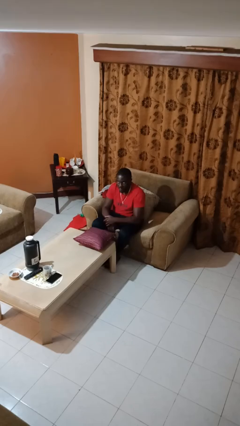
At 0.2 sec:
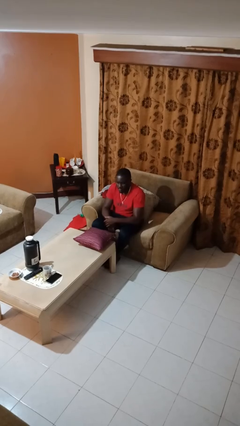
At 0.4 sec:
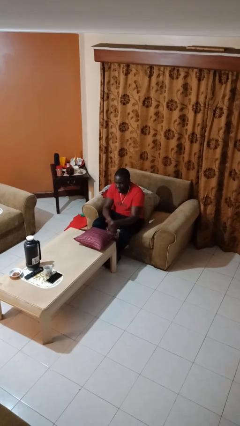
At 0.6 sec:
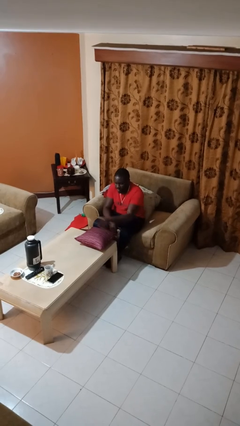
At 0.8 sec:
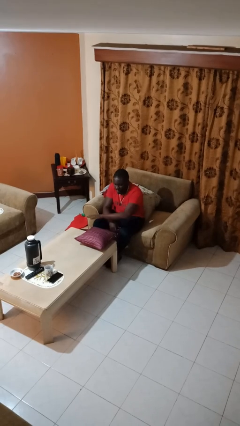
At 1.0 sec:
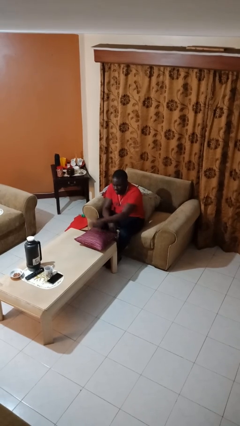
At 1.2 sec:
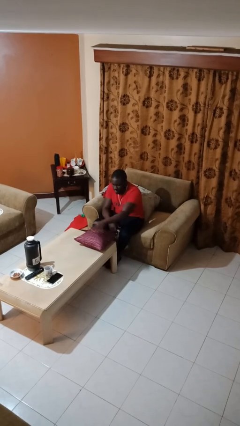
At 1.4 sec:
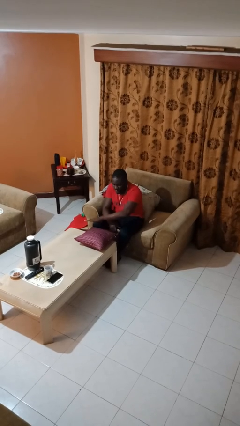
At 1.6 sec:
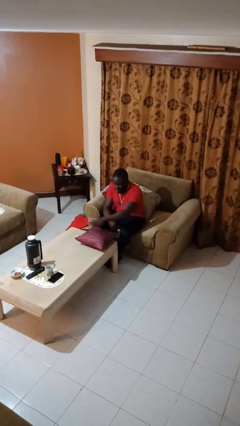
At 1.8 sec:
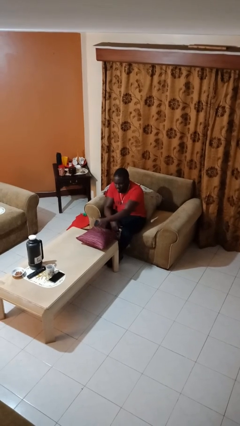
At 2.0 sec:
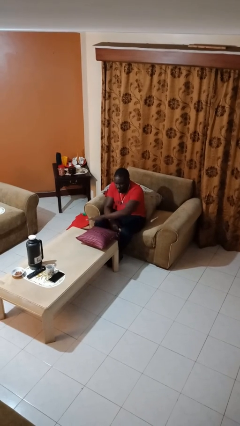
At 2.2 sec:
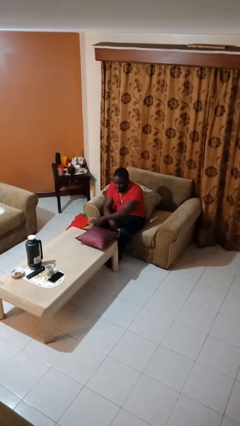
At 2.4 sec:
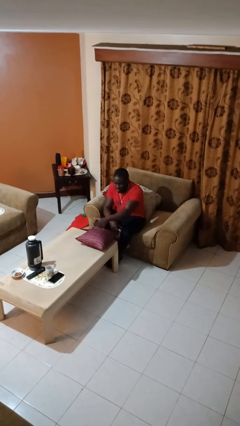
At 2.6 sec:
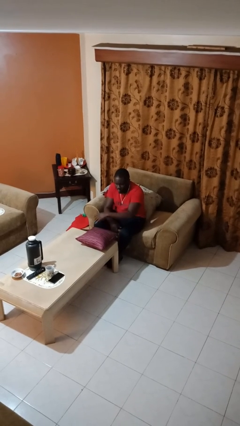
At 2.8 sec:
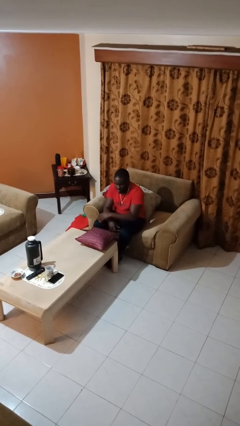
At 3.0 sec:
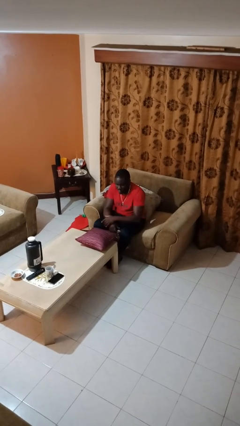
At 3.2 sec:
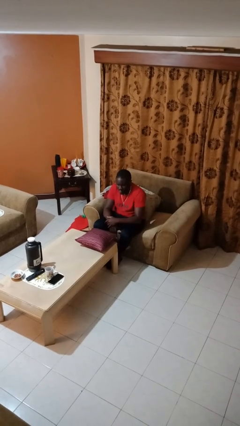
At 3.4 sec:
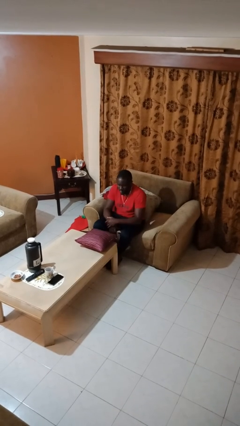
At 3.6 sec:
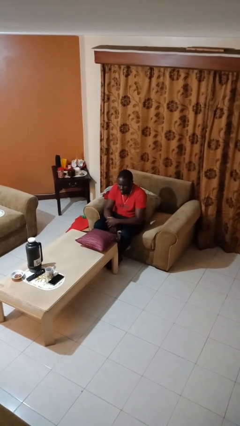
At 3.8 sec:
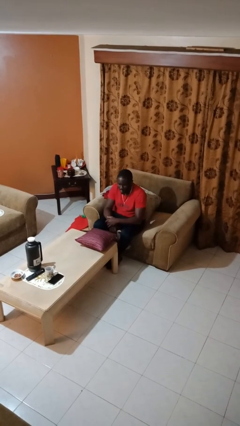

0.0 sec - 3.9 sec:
person waves hand over object

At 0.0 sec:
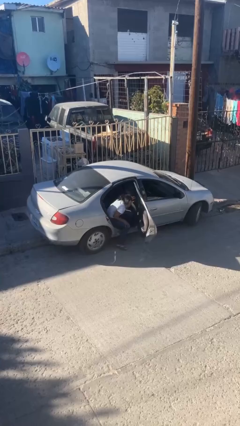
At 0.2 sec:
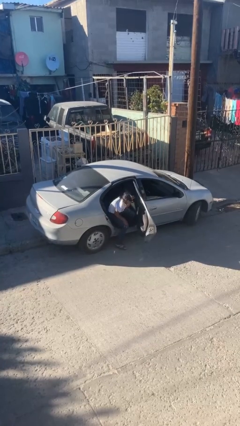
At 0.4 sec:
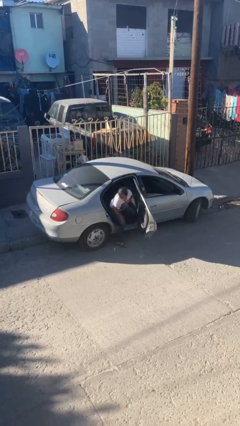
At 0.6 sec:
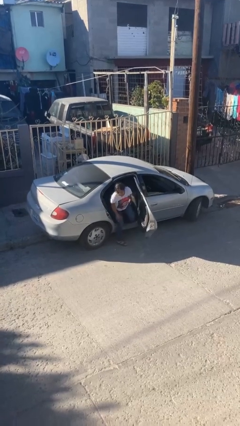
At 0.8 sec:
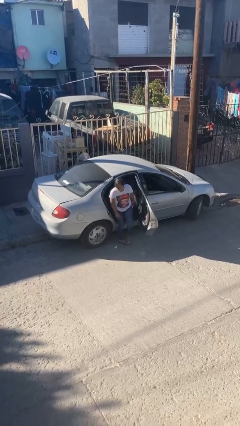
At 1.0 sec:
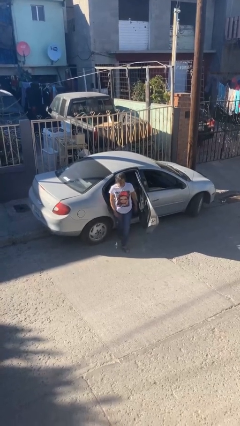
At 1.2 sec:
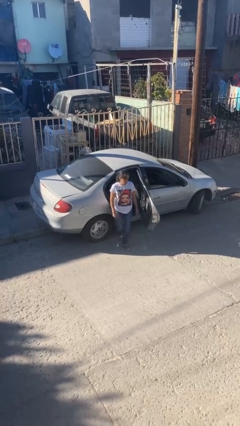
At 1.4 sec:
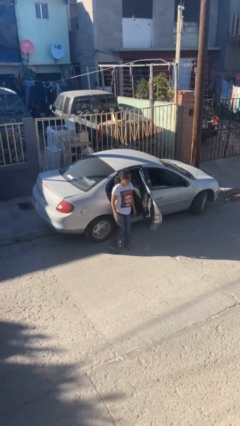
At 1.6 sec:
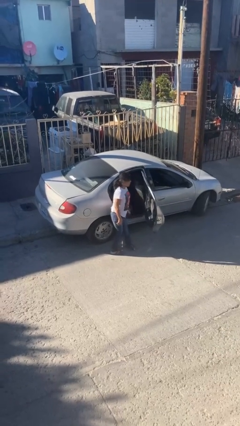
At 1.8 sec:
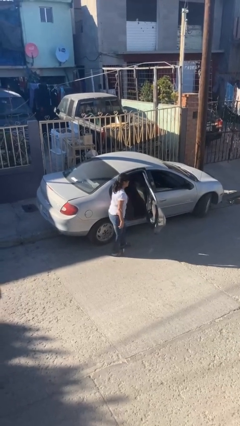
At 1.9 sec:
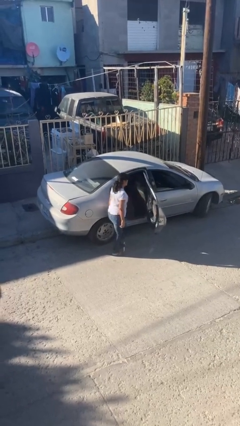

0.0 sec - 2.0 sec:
person exits car

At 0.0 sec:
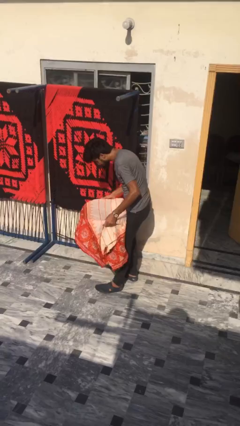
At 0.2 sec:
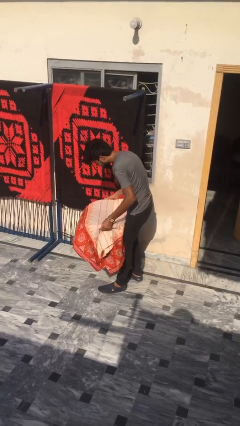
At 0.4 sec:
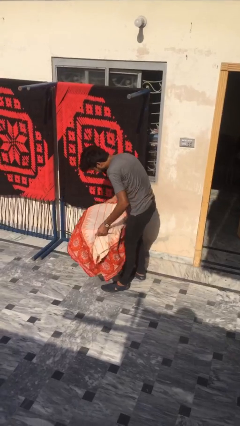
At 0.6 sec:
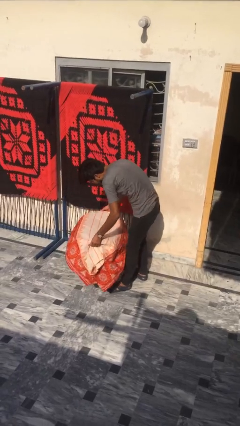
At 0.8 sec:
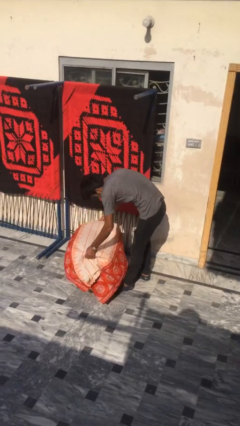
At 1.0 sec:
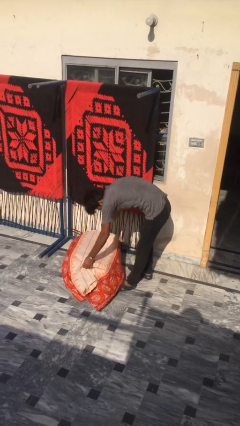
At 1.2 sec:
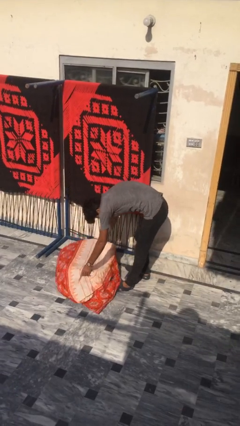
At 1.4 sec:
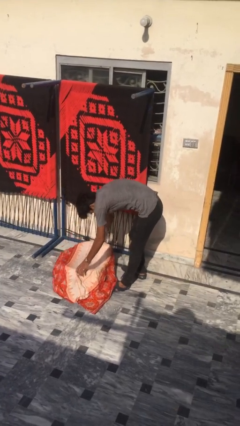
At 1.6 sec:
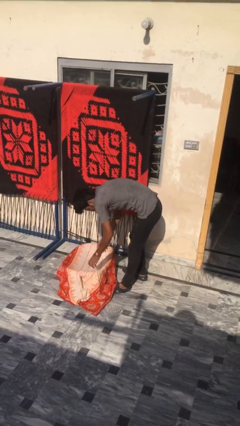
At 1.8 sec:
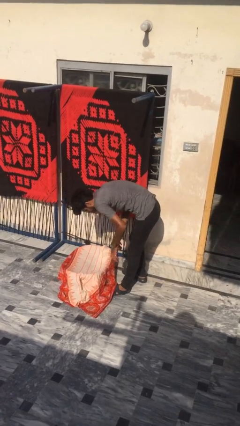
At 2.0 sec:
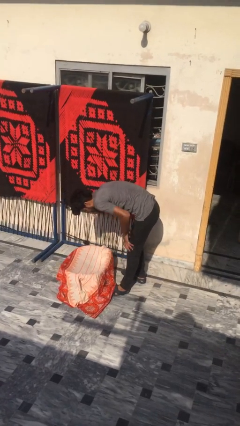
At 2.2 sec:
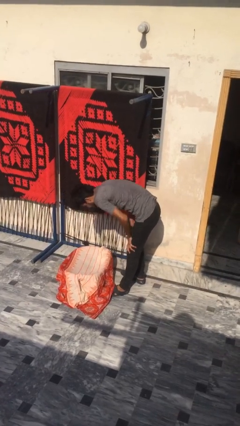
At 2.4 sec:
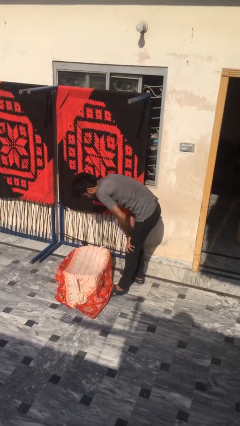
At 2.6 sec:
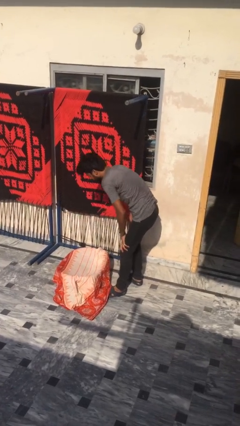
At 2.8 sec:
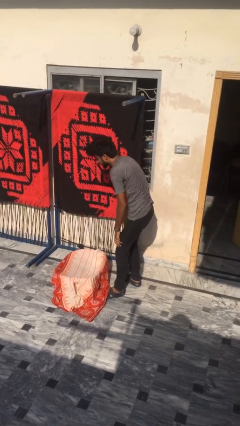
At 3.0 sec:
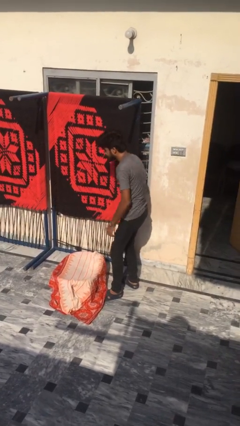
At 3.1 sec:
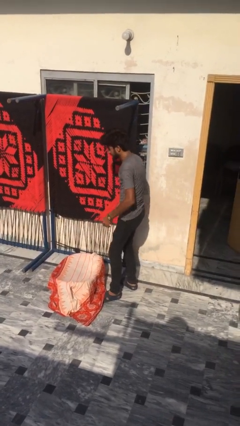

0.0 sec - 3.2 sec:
person puts down object on floor

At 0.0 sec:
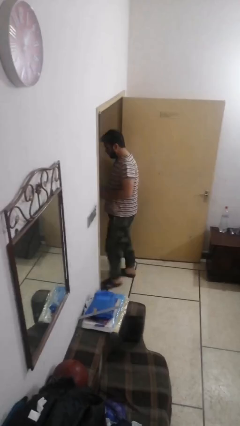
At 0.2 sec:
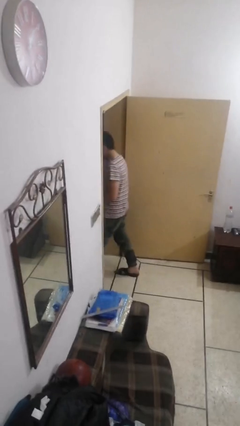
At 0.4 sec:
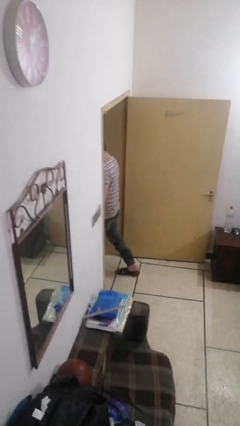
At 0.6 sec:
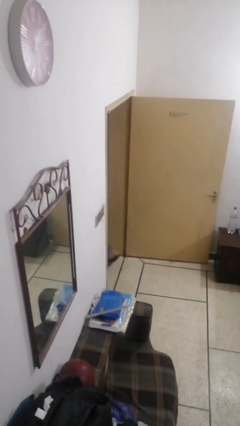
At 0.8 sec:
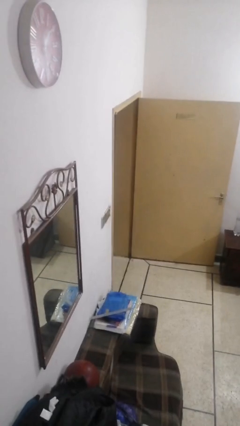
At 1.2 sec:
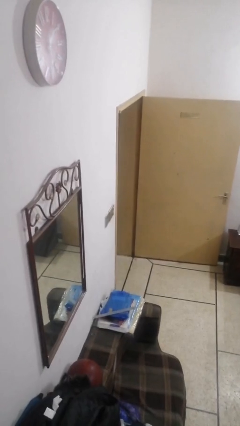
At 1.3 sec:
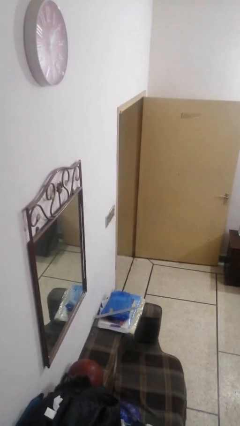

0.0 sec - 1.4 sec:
person exits scene through structure

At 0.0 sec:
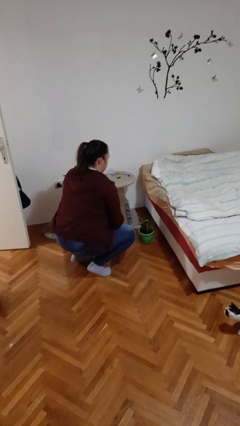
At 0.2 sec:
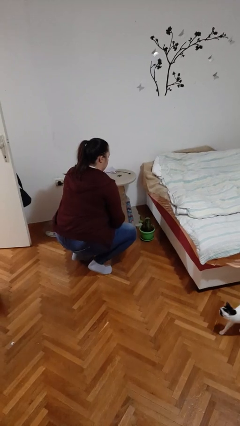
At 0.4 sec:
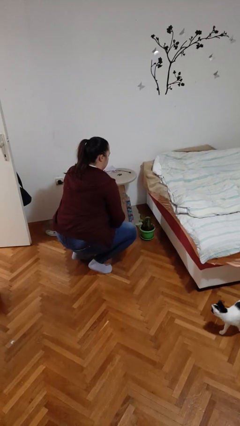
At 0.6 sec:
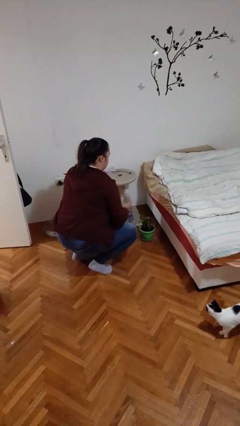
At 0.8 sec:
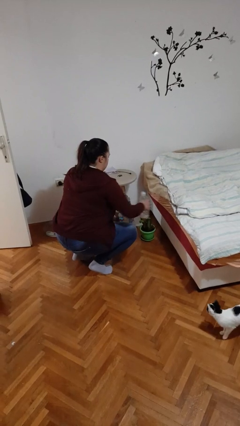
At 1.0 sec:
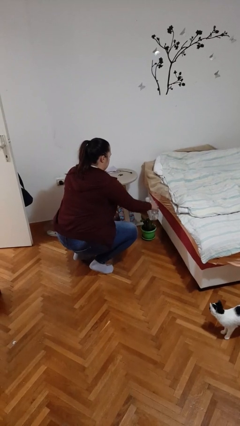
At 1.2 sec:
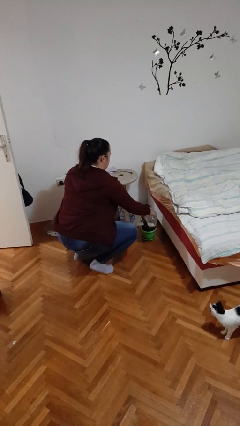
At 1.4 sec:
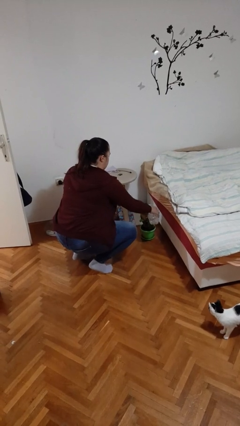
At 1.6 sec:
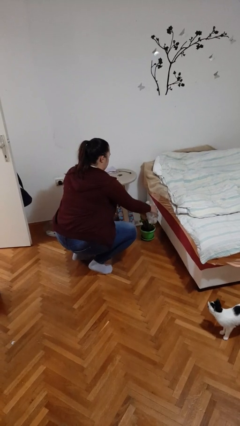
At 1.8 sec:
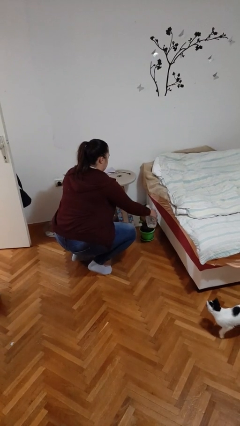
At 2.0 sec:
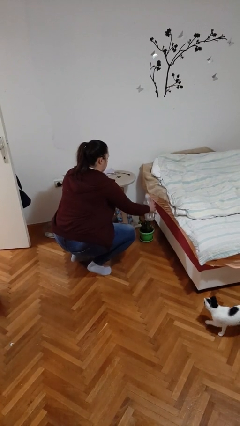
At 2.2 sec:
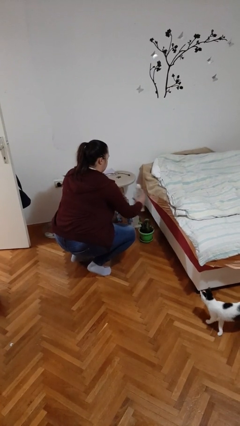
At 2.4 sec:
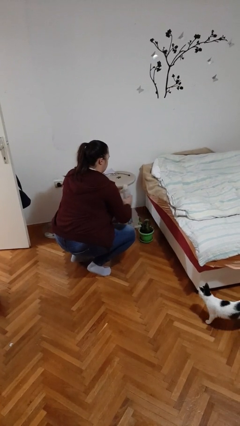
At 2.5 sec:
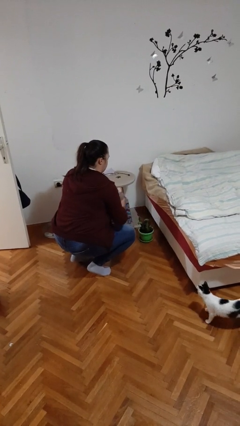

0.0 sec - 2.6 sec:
person waters houseplant

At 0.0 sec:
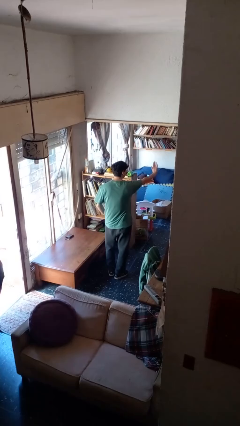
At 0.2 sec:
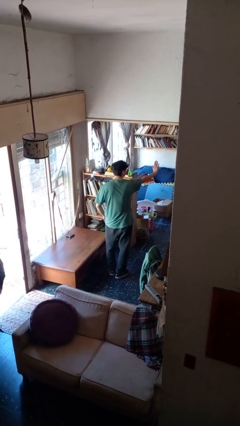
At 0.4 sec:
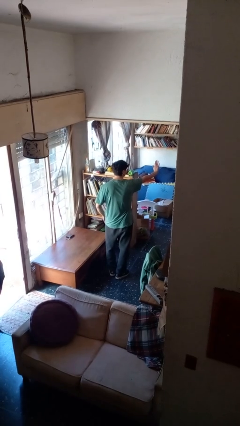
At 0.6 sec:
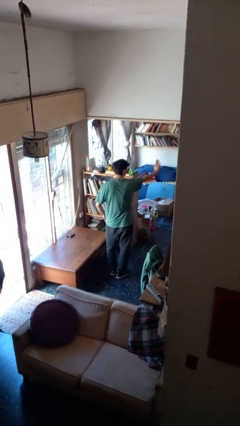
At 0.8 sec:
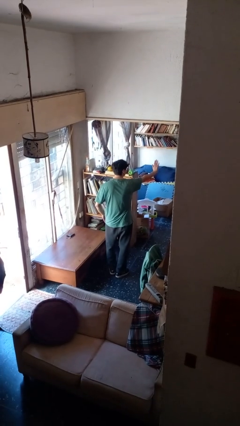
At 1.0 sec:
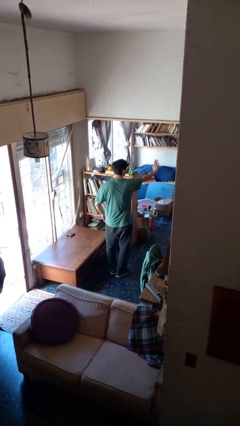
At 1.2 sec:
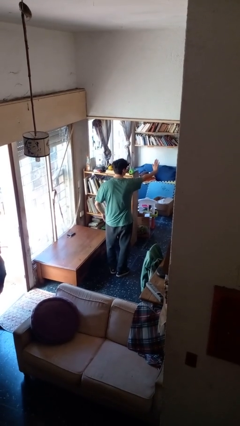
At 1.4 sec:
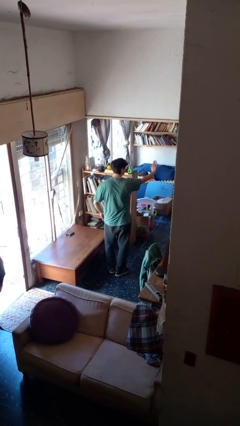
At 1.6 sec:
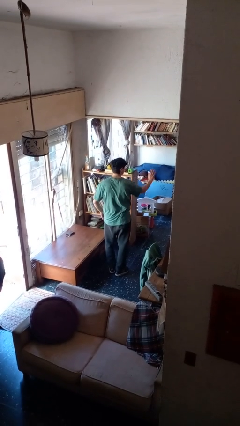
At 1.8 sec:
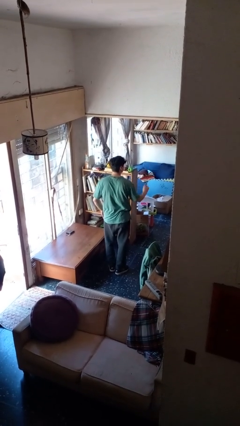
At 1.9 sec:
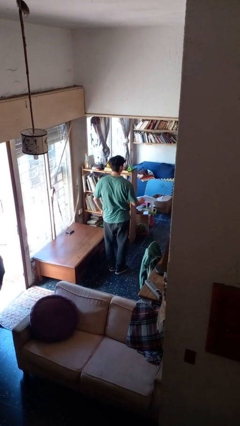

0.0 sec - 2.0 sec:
person gestures stop

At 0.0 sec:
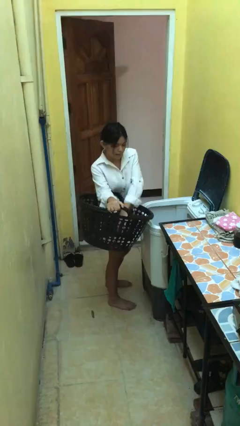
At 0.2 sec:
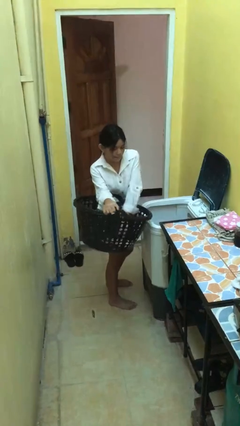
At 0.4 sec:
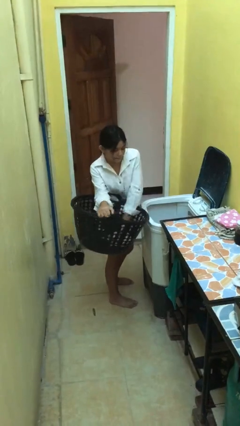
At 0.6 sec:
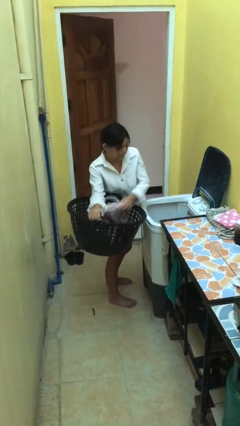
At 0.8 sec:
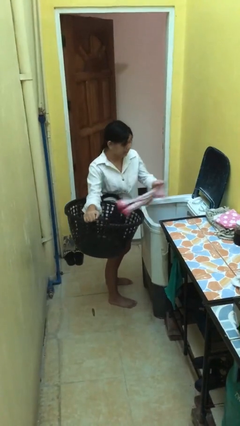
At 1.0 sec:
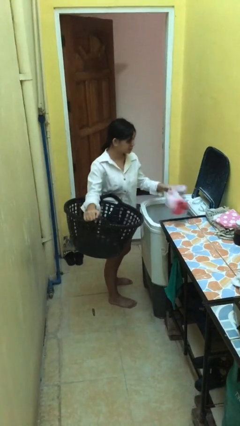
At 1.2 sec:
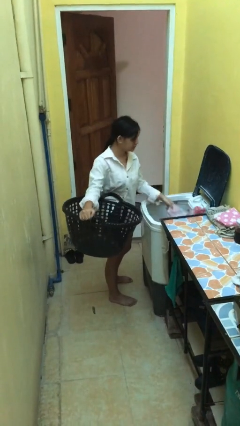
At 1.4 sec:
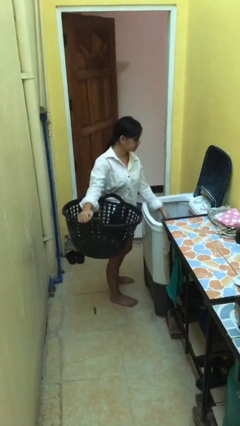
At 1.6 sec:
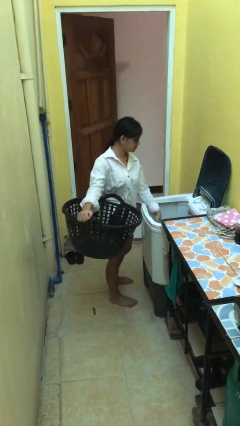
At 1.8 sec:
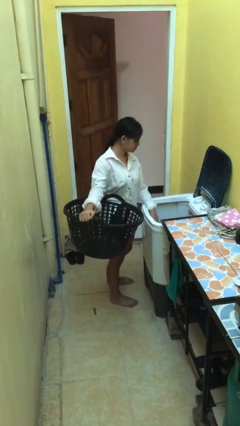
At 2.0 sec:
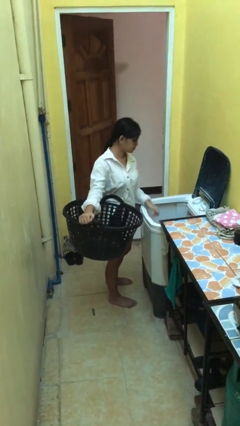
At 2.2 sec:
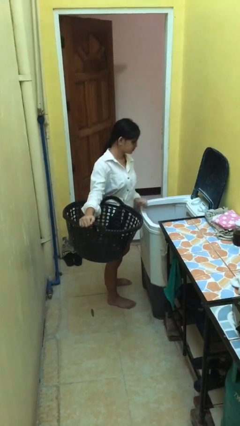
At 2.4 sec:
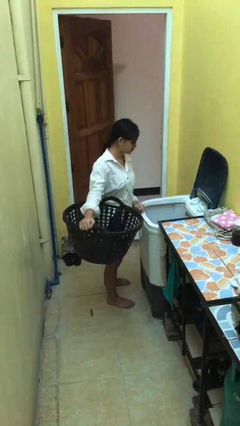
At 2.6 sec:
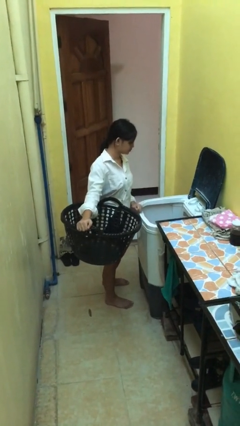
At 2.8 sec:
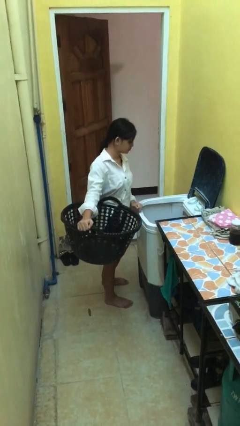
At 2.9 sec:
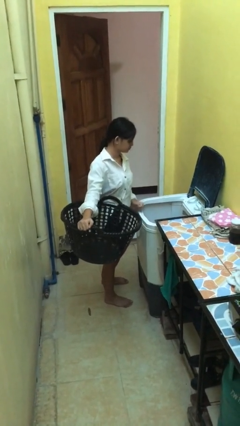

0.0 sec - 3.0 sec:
person loads clotheswasher
